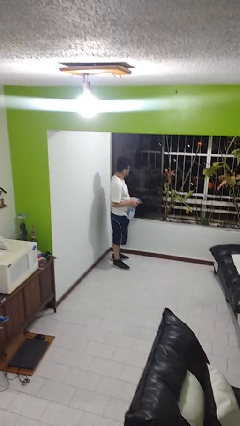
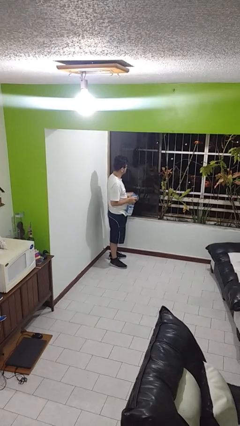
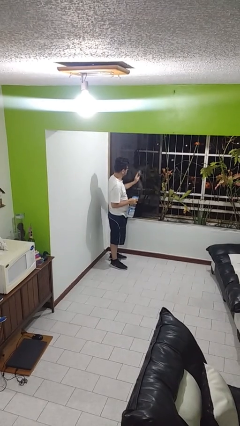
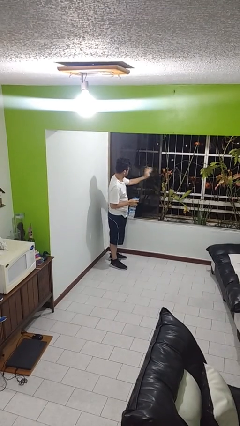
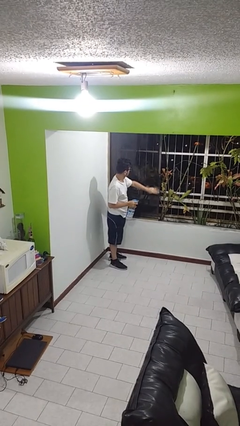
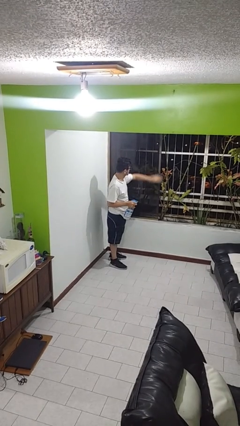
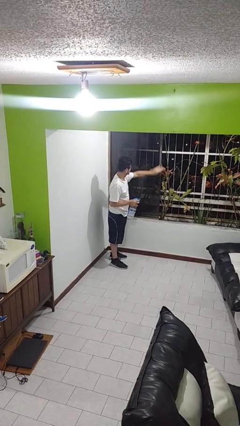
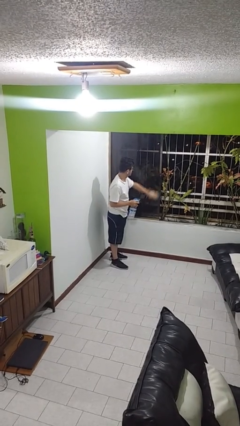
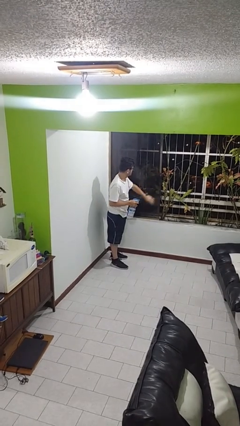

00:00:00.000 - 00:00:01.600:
person washes window

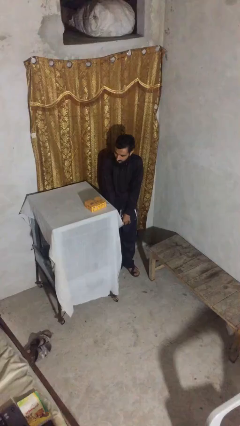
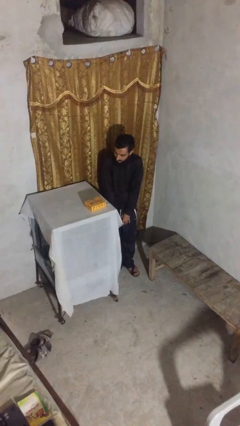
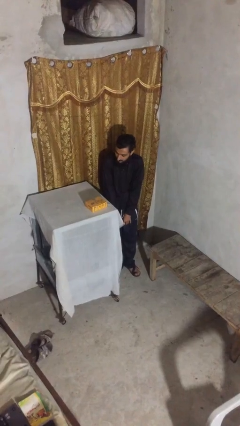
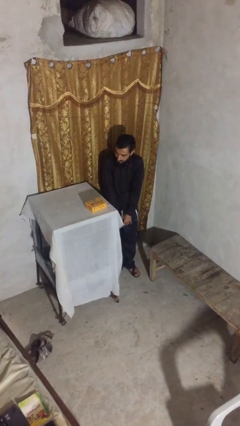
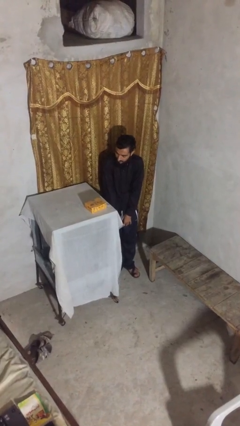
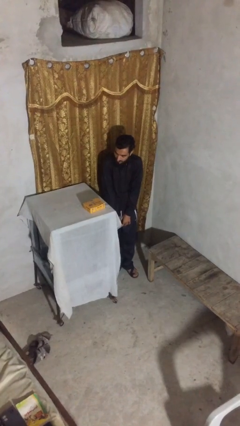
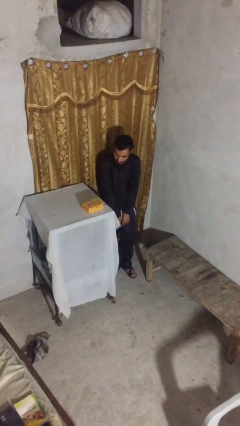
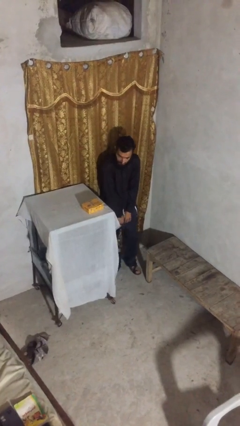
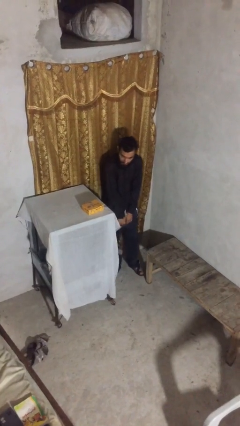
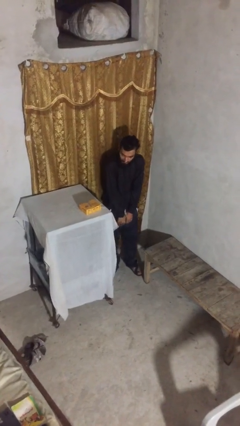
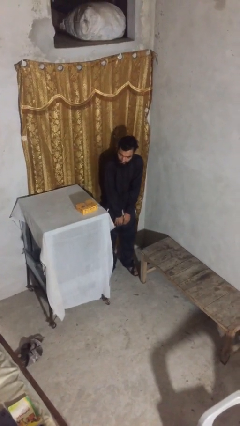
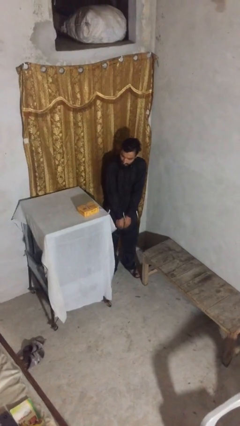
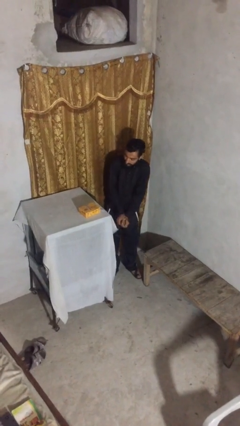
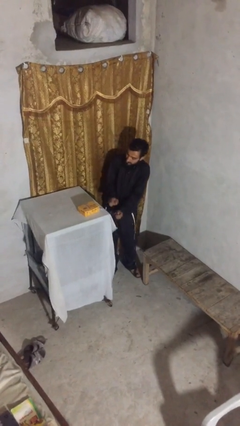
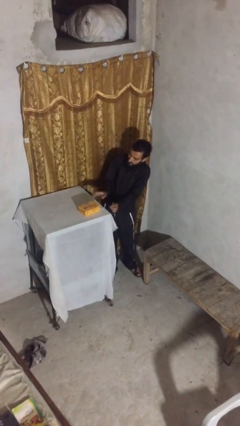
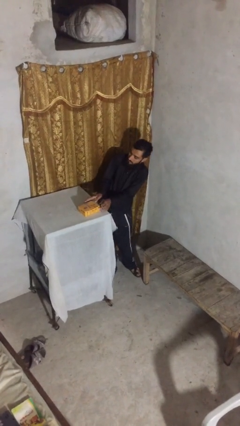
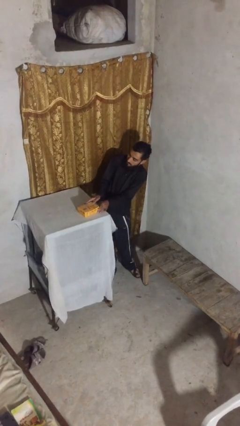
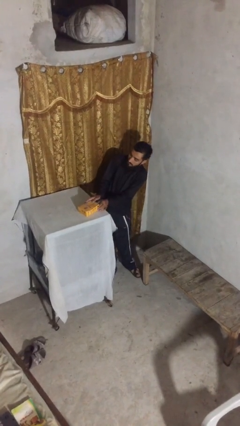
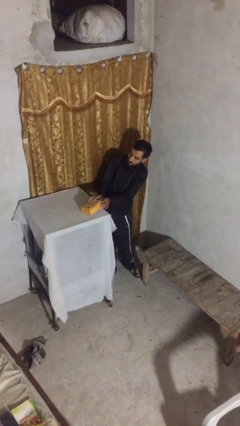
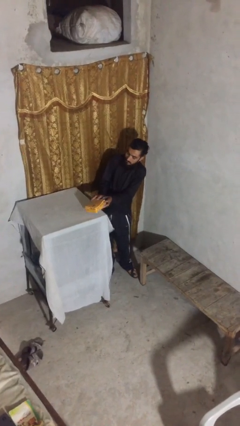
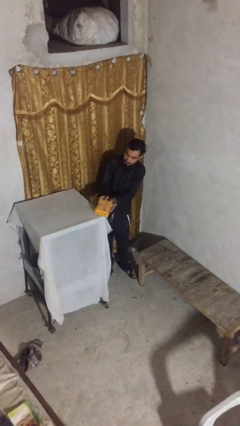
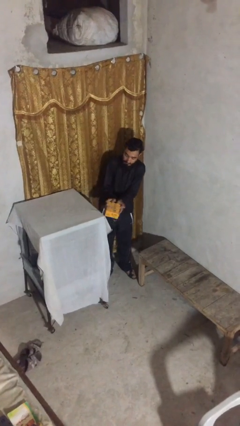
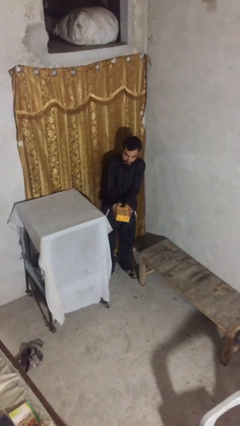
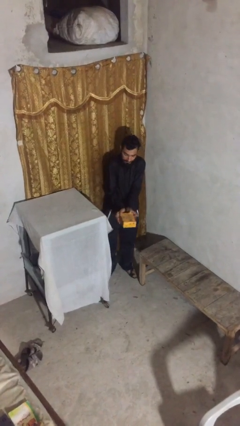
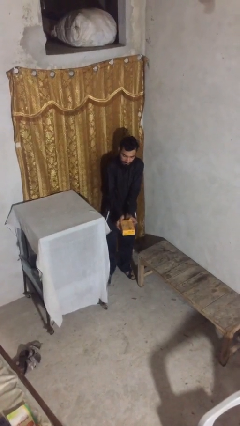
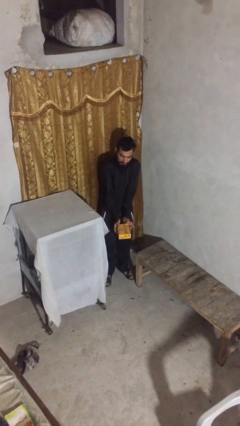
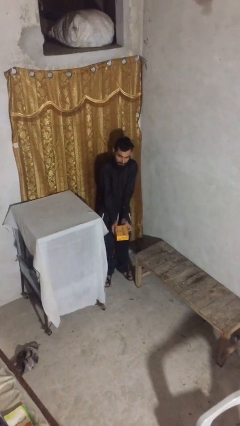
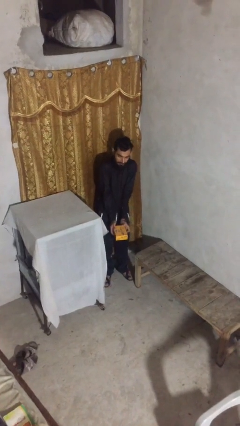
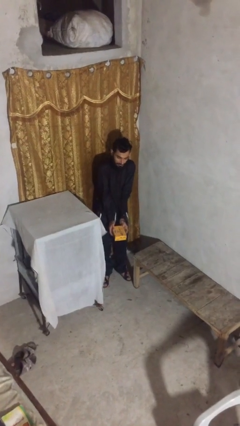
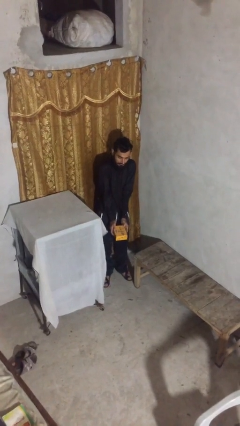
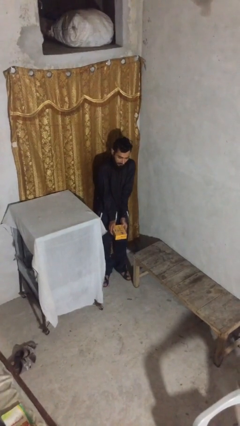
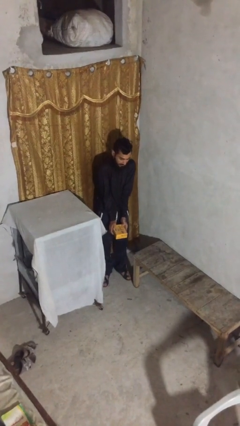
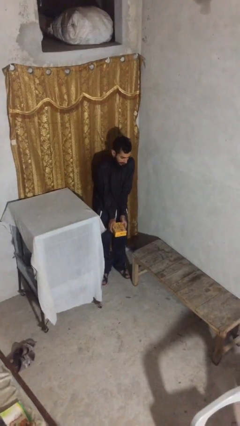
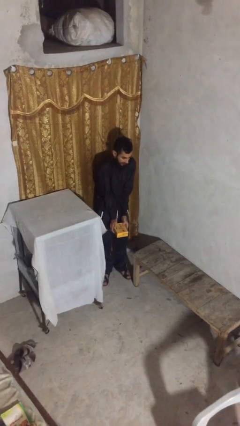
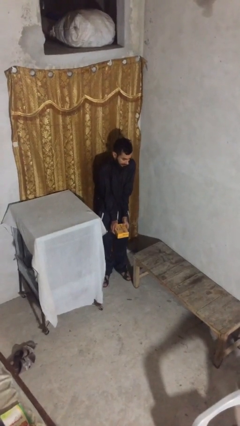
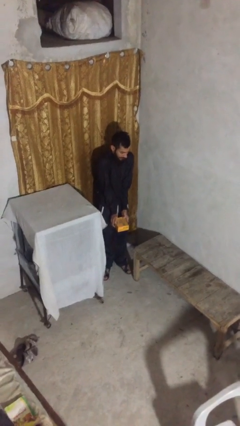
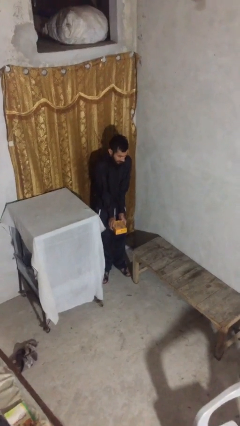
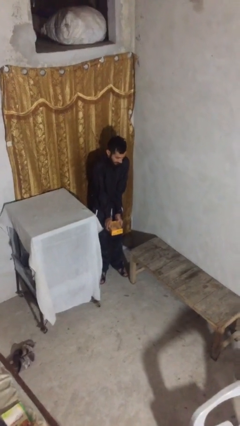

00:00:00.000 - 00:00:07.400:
person picks up object from shelf

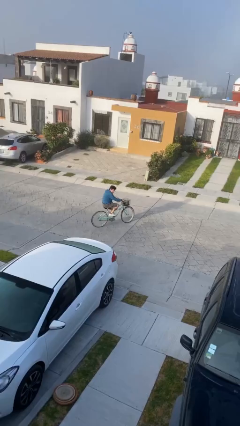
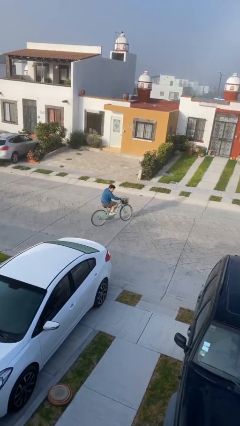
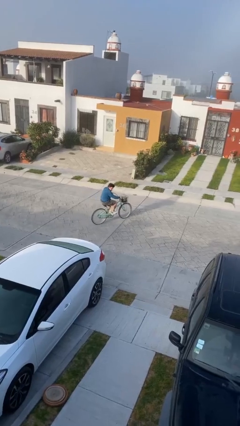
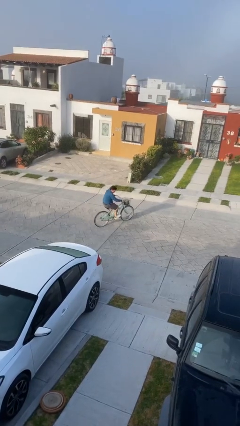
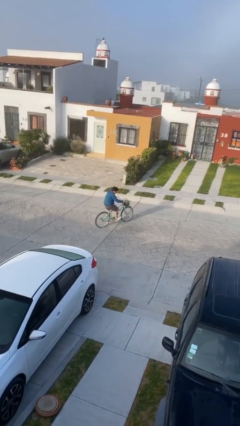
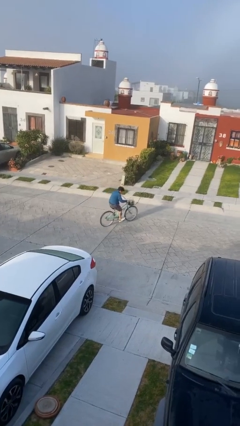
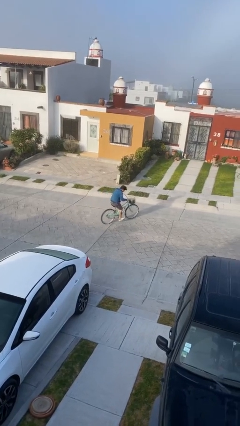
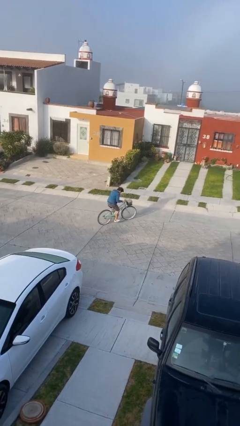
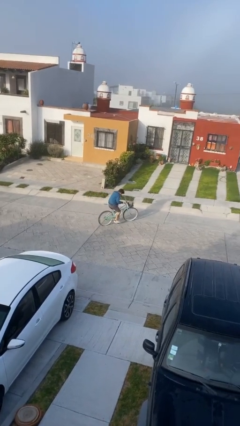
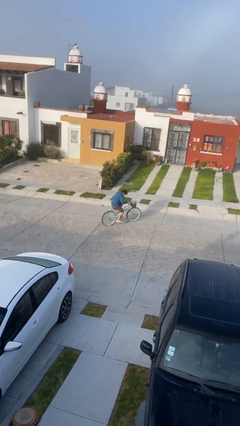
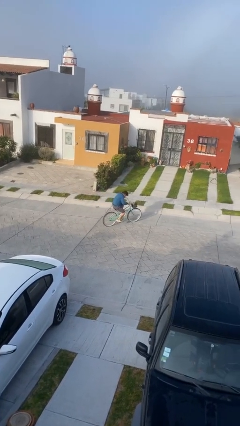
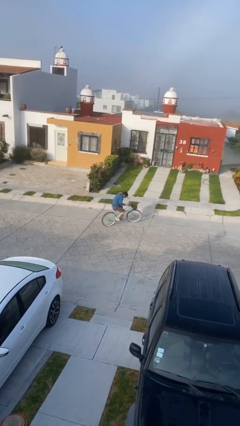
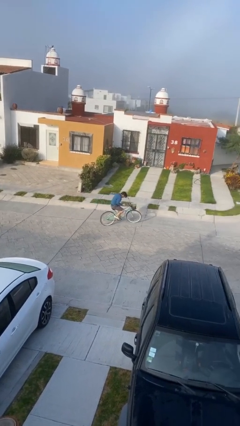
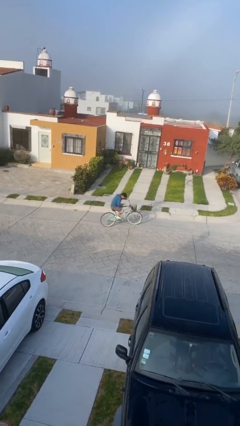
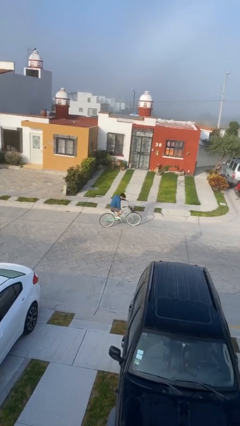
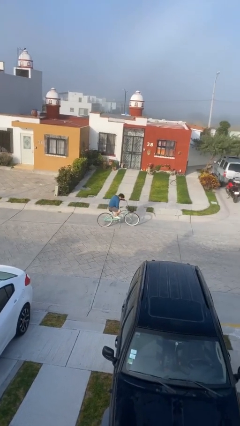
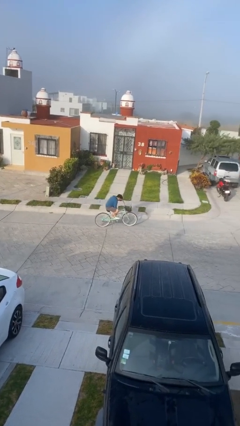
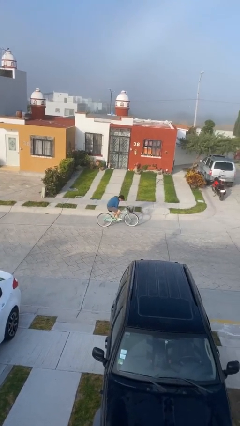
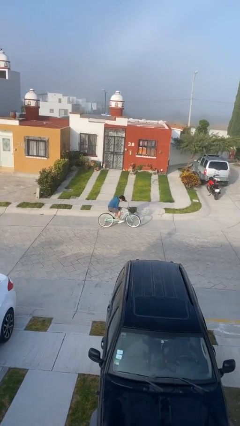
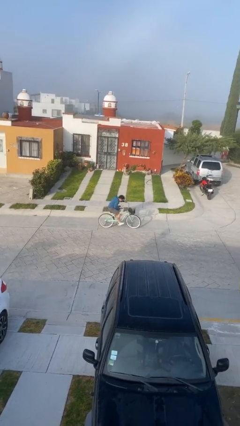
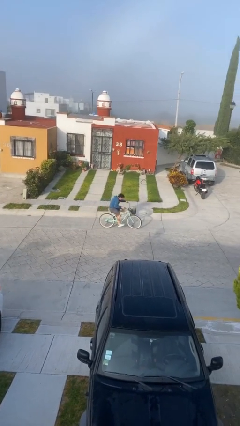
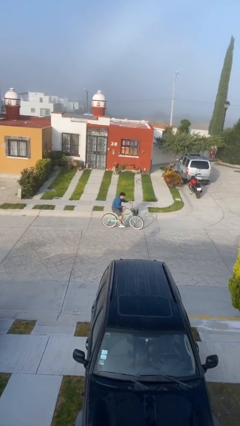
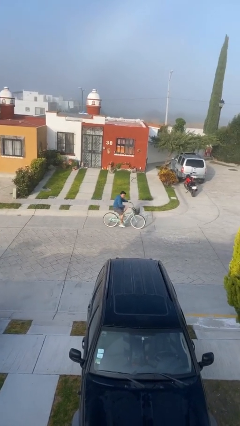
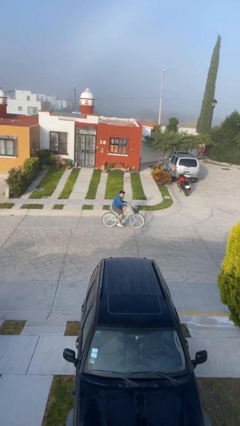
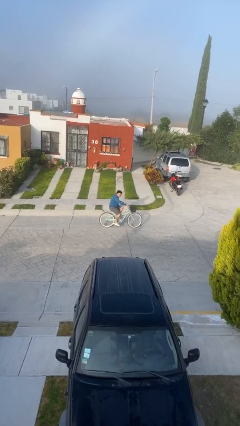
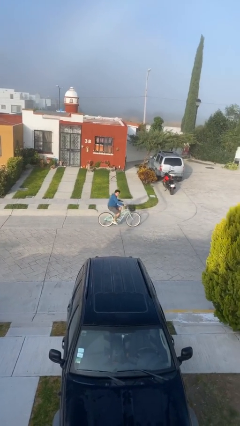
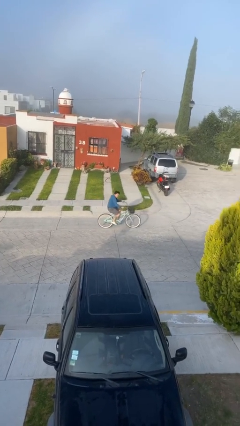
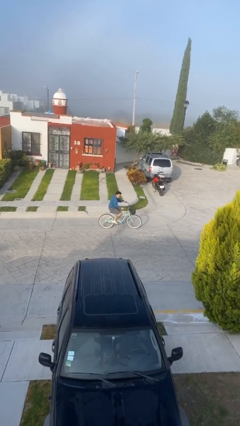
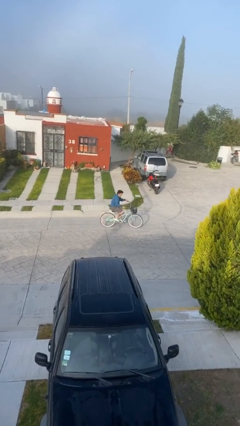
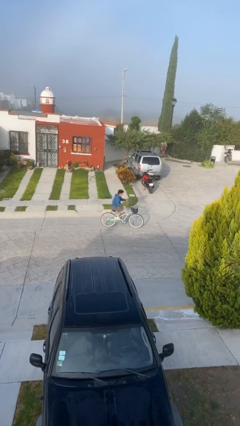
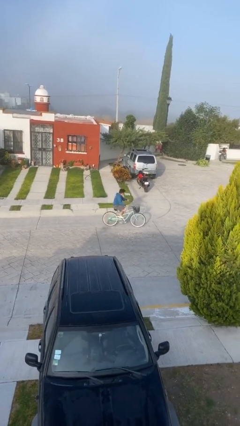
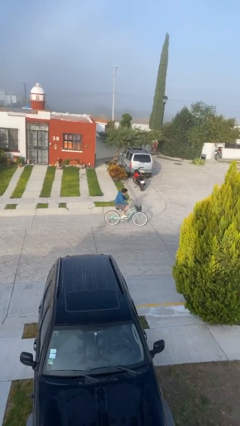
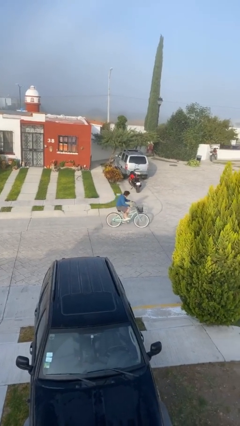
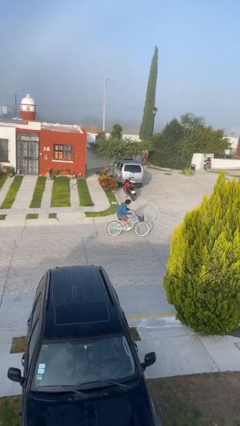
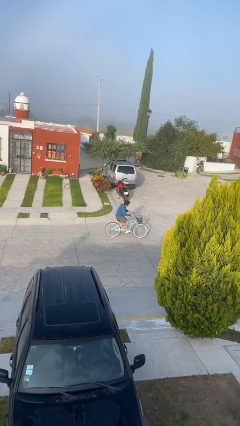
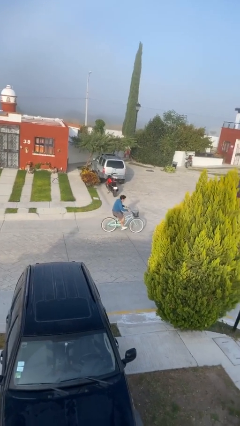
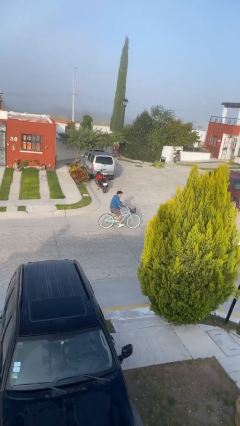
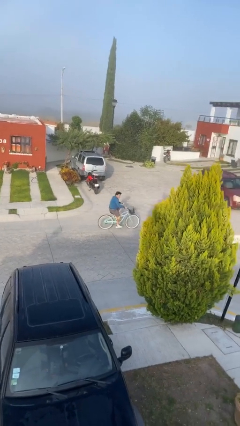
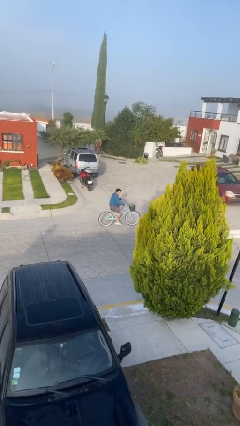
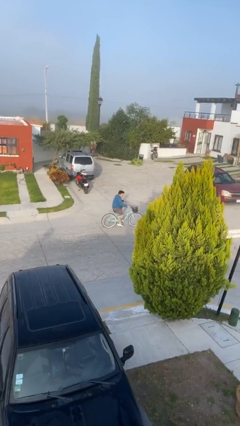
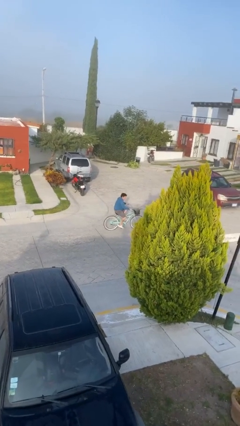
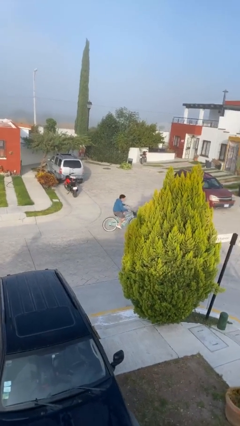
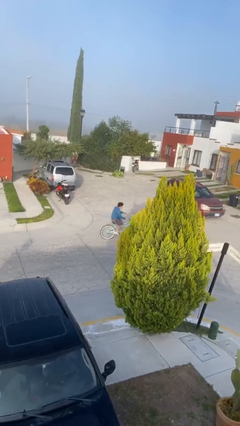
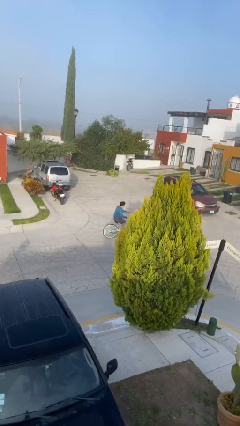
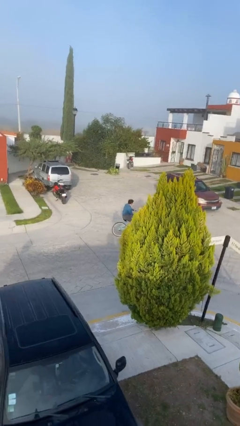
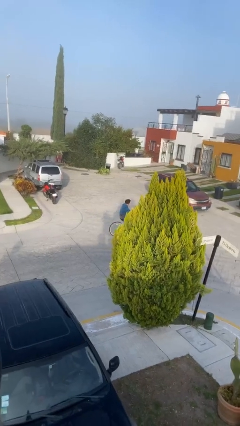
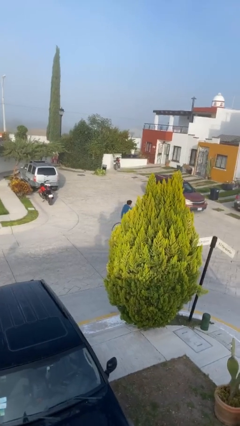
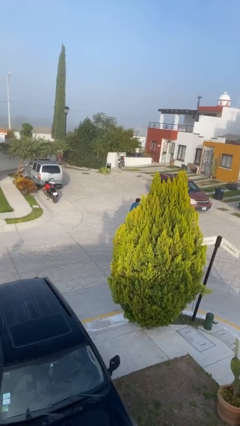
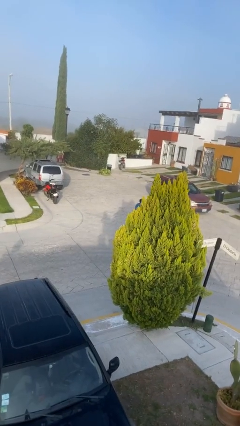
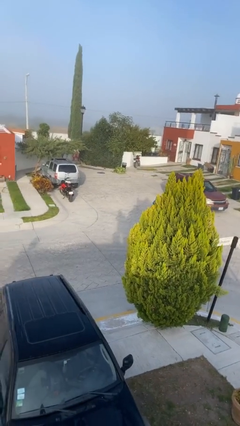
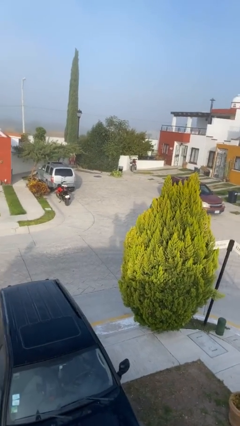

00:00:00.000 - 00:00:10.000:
person rides bicycle
